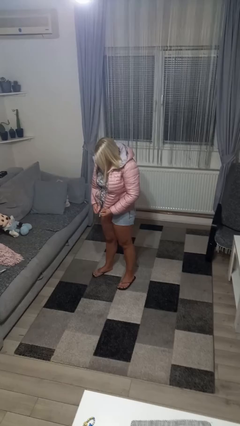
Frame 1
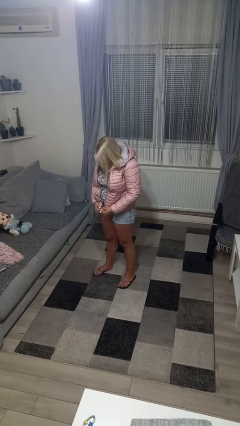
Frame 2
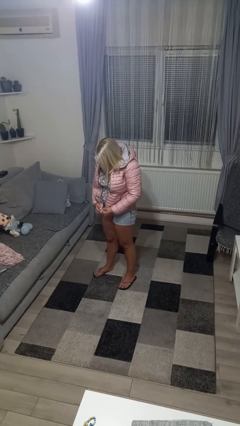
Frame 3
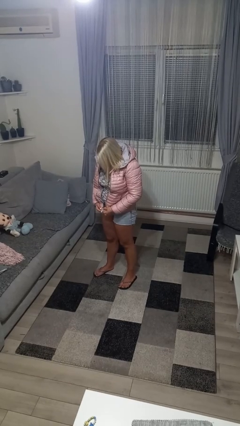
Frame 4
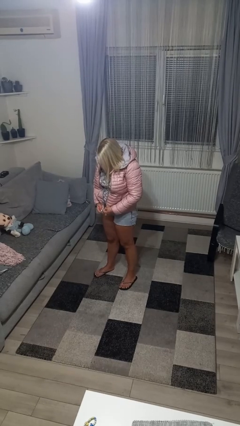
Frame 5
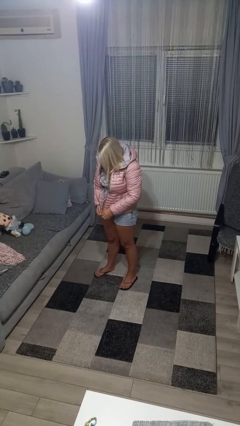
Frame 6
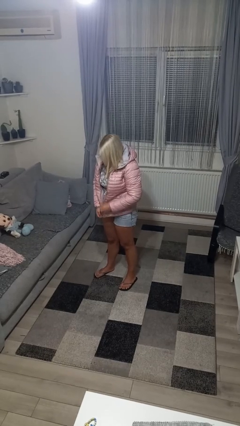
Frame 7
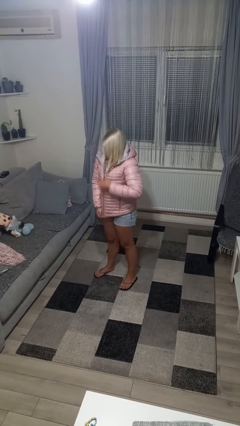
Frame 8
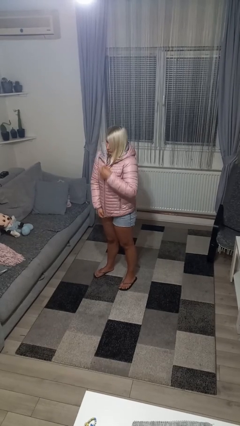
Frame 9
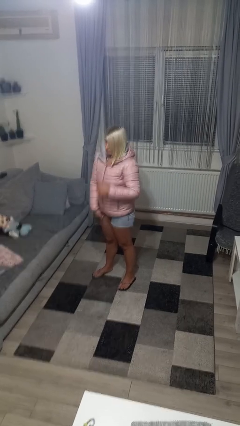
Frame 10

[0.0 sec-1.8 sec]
person zips up jacket

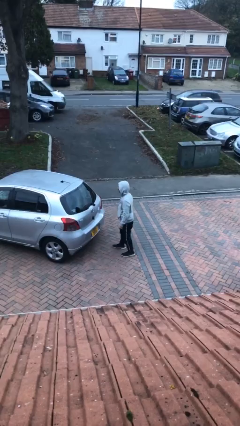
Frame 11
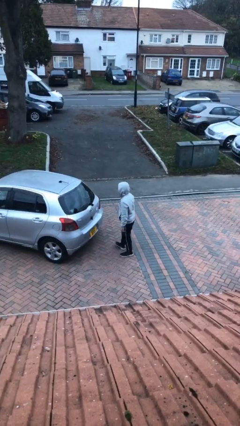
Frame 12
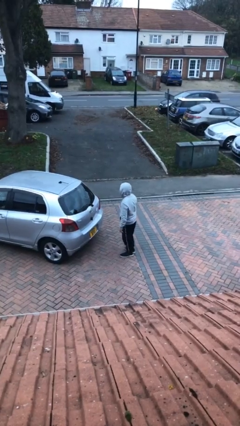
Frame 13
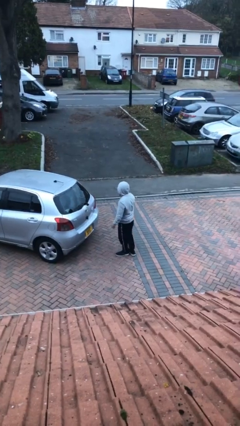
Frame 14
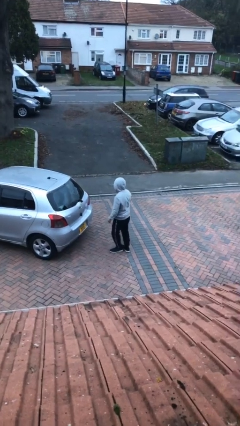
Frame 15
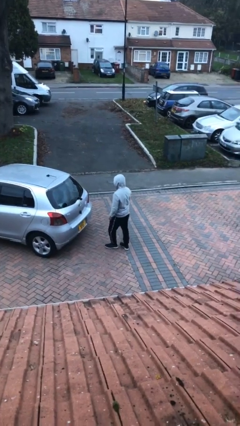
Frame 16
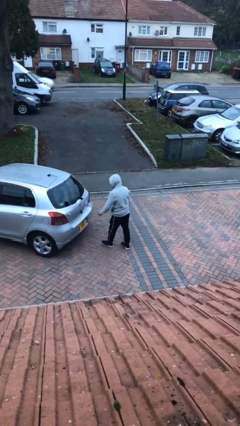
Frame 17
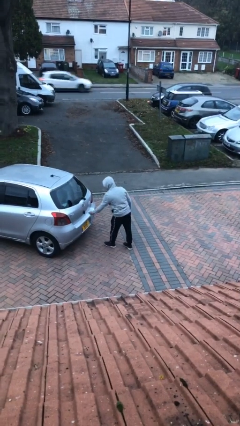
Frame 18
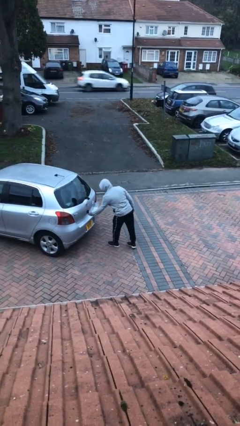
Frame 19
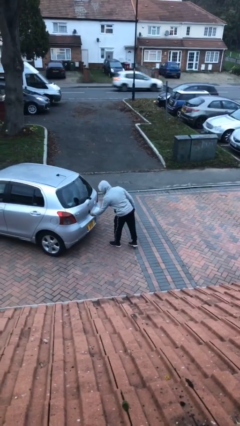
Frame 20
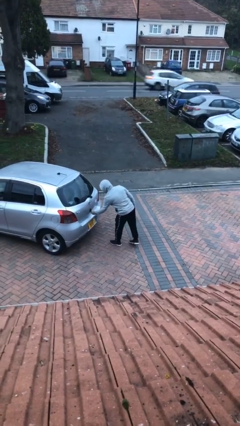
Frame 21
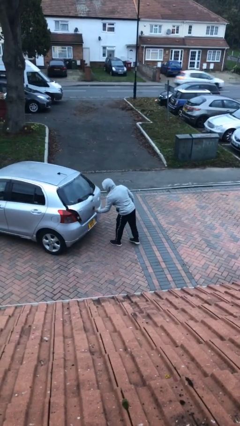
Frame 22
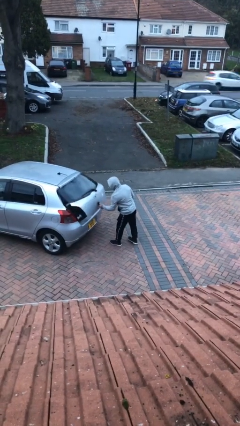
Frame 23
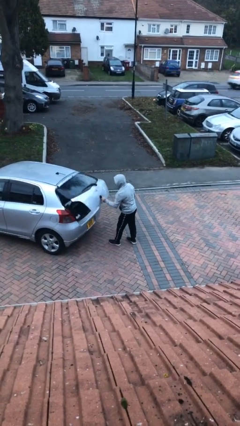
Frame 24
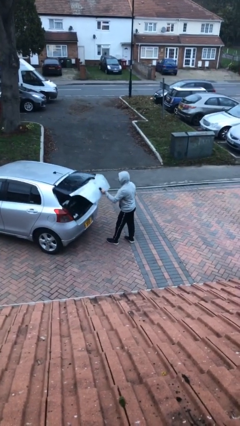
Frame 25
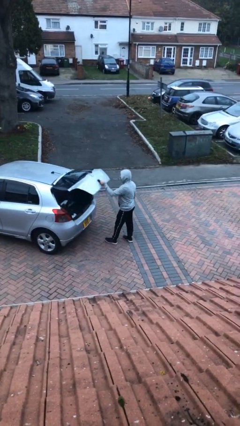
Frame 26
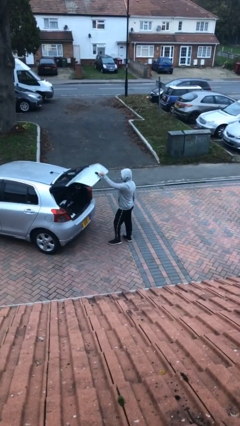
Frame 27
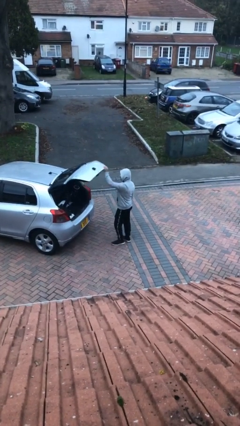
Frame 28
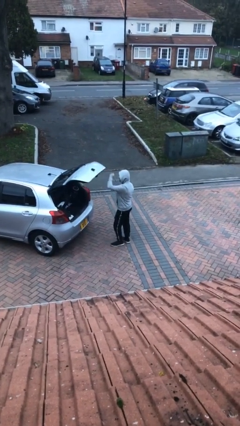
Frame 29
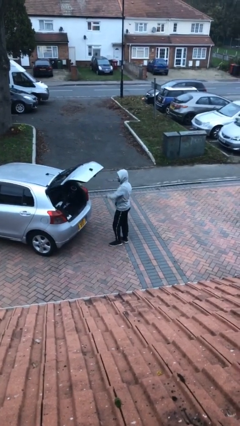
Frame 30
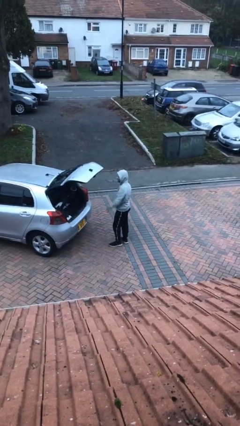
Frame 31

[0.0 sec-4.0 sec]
person opens car trunk

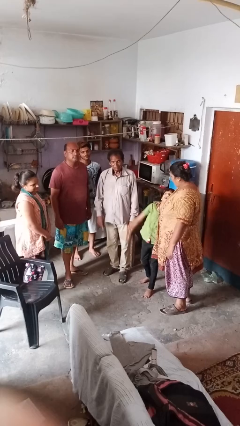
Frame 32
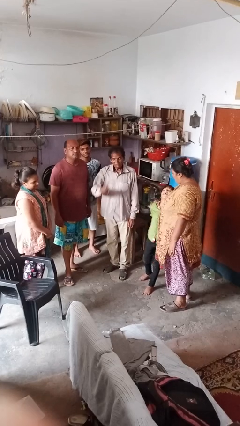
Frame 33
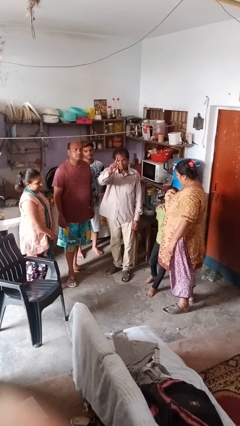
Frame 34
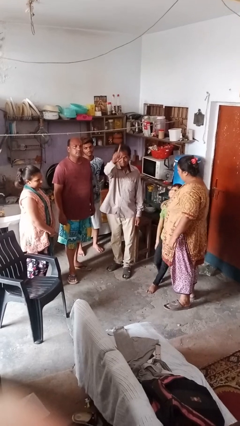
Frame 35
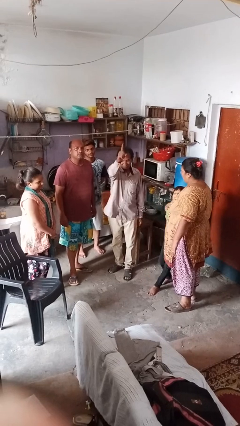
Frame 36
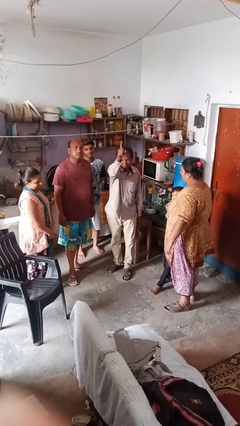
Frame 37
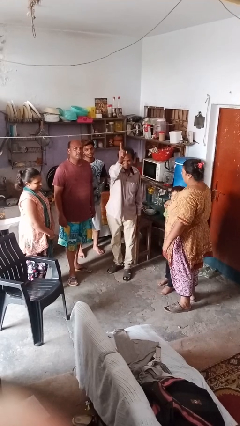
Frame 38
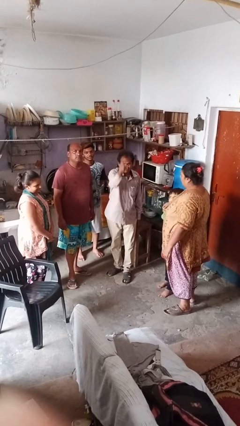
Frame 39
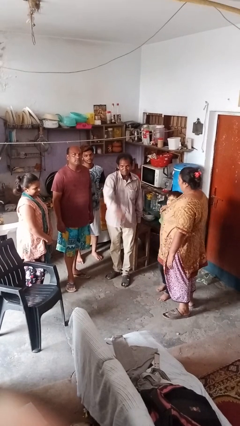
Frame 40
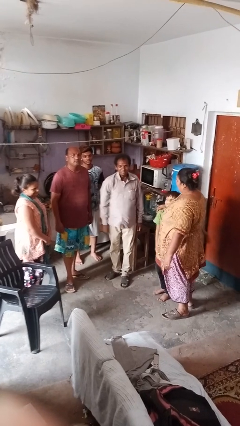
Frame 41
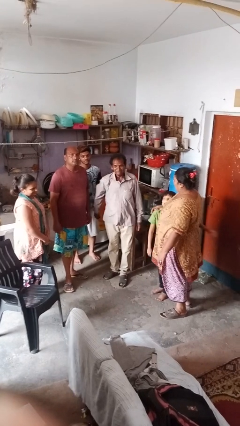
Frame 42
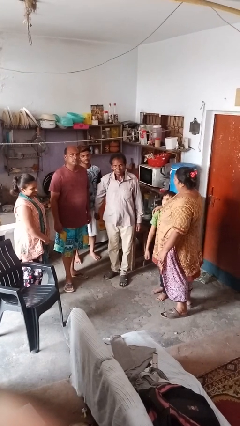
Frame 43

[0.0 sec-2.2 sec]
person points at person

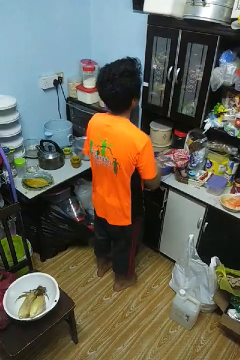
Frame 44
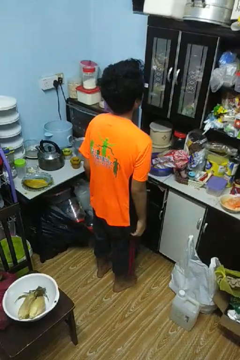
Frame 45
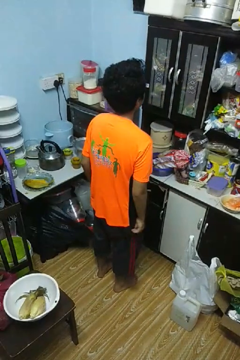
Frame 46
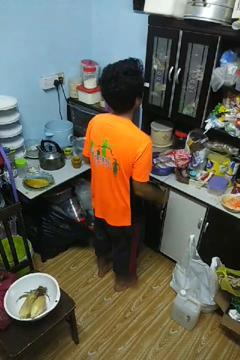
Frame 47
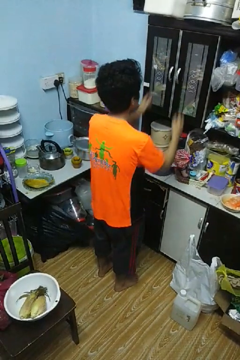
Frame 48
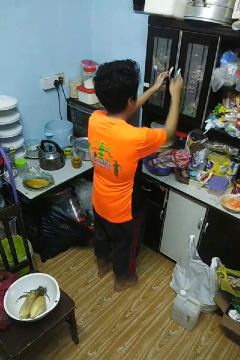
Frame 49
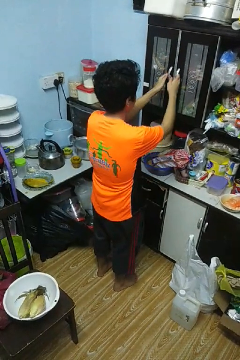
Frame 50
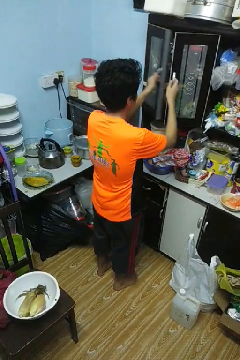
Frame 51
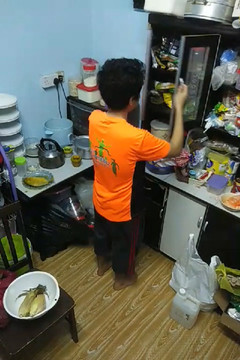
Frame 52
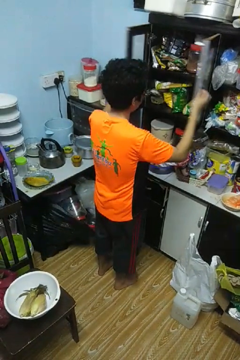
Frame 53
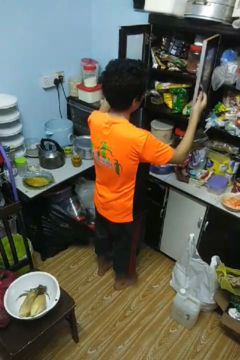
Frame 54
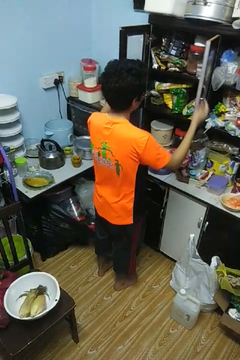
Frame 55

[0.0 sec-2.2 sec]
person opens cabinet

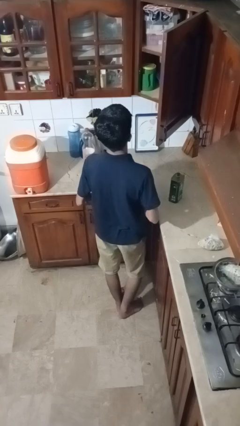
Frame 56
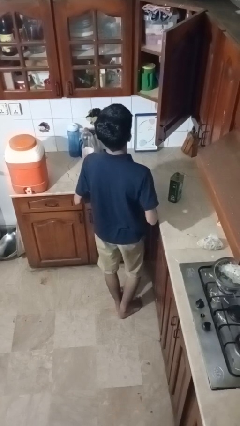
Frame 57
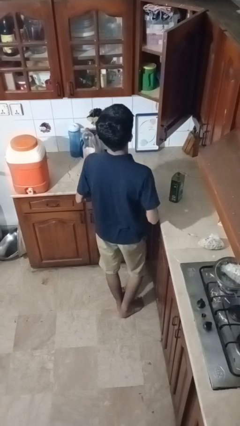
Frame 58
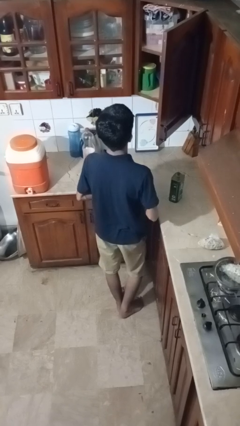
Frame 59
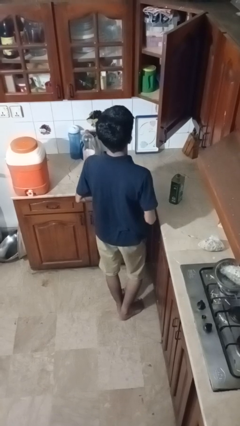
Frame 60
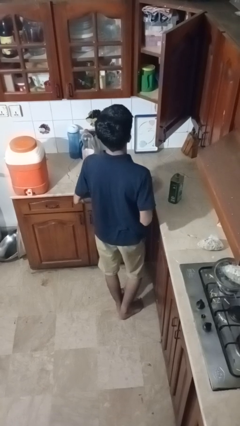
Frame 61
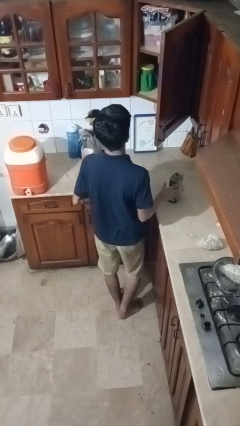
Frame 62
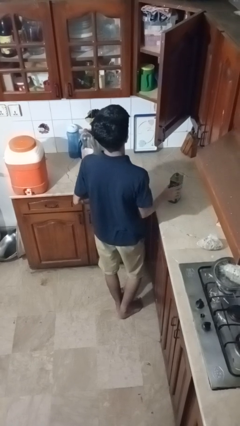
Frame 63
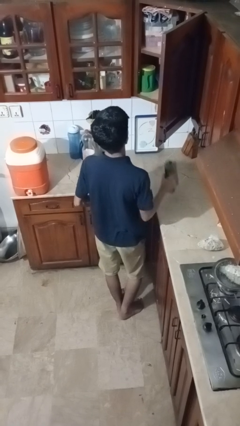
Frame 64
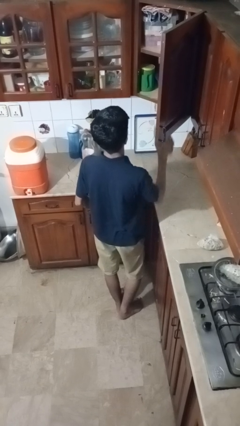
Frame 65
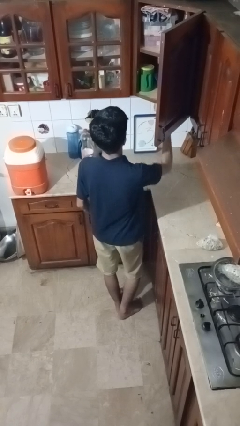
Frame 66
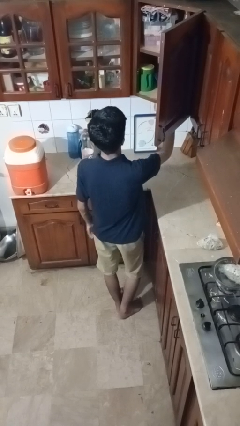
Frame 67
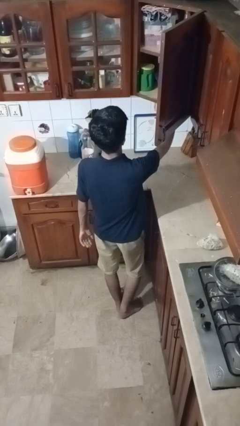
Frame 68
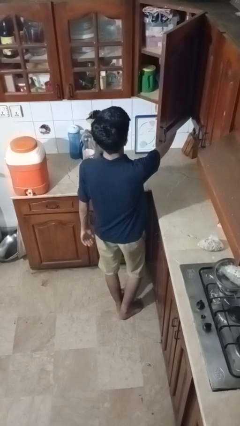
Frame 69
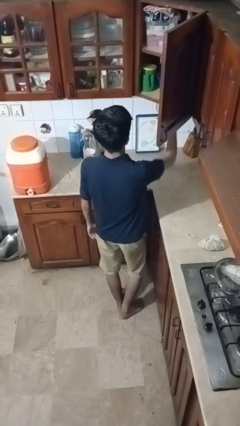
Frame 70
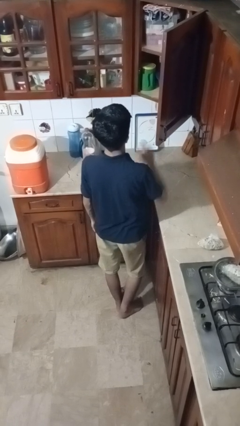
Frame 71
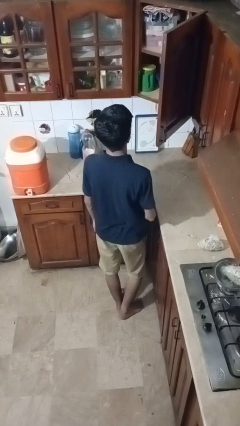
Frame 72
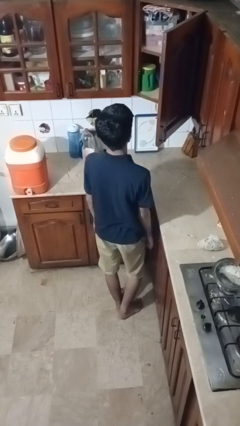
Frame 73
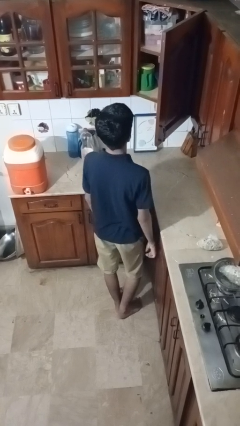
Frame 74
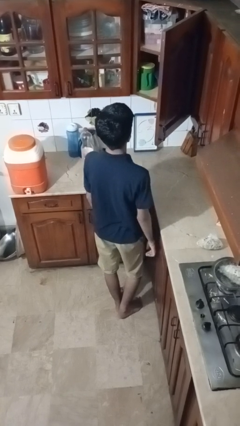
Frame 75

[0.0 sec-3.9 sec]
person puts object in cabinet

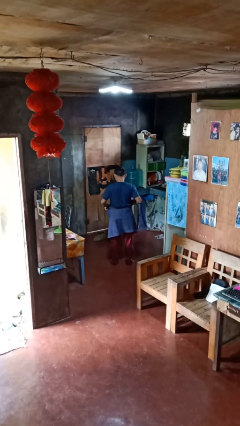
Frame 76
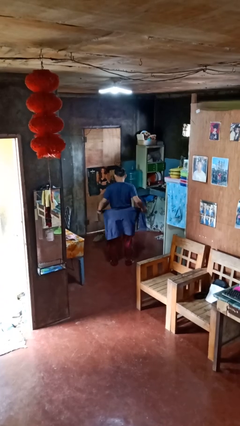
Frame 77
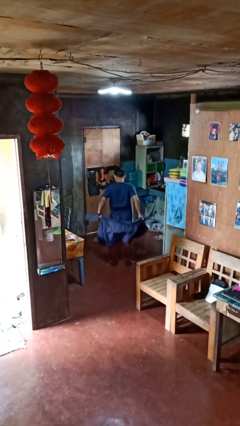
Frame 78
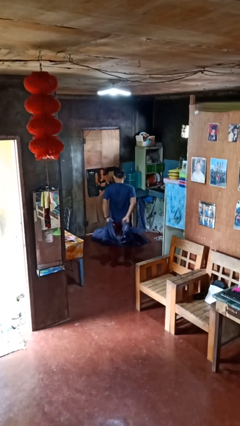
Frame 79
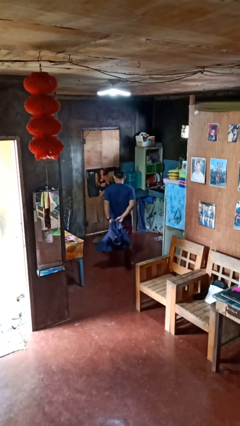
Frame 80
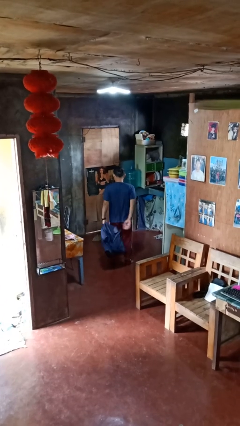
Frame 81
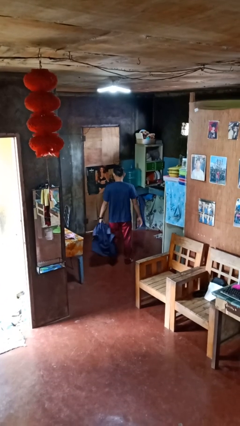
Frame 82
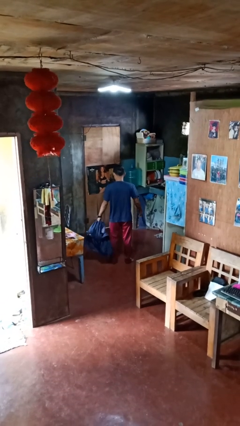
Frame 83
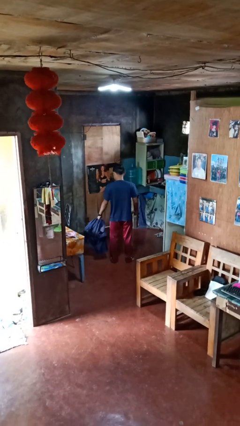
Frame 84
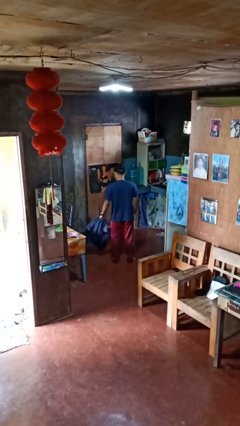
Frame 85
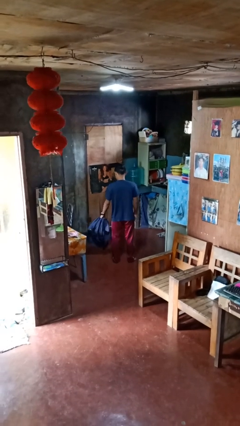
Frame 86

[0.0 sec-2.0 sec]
person unties jacket around waist

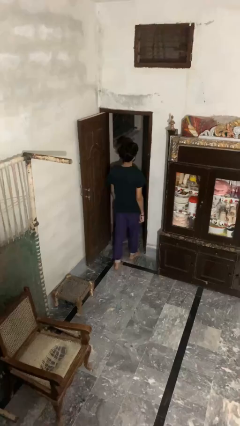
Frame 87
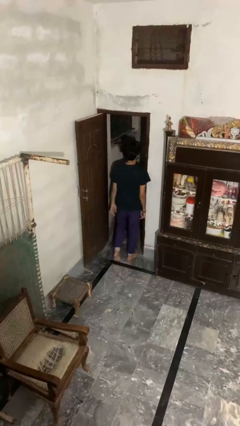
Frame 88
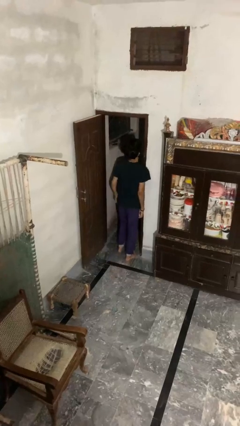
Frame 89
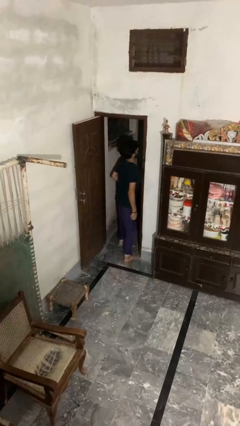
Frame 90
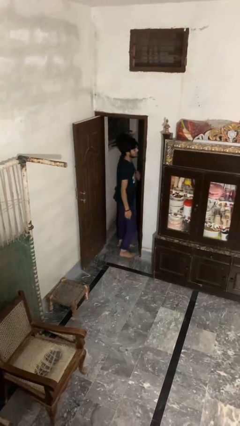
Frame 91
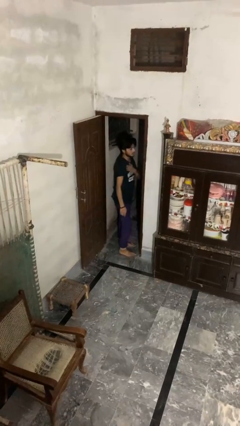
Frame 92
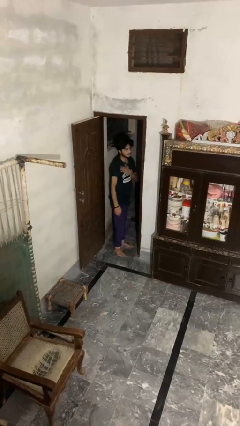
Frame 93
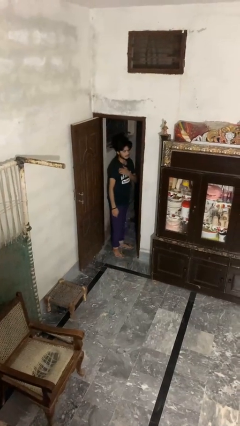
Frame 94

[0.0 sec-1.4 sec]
person bumps into wall

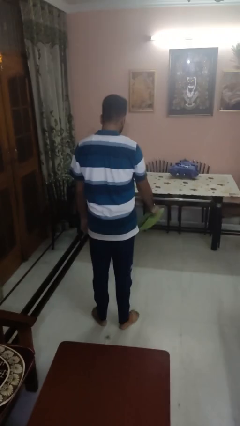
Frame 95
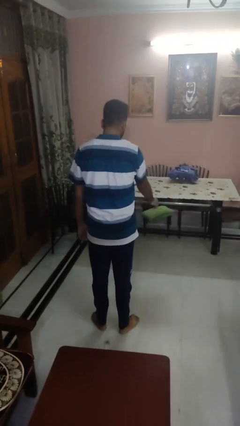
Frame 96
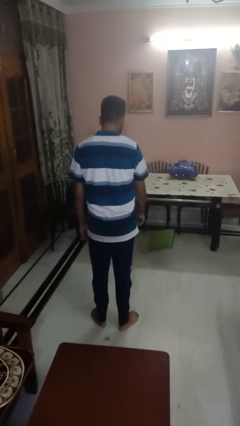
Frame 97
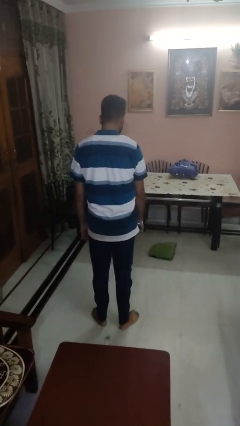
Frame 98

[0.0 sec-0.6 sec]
person throws object to ground
